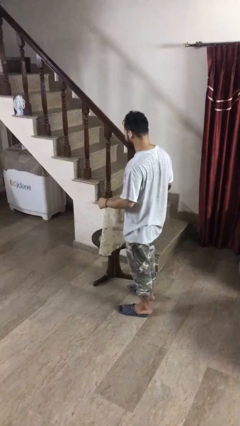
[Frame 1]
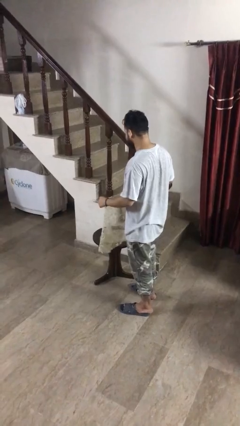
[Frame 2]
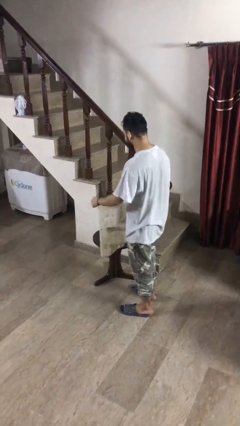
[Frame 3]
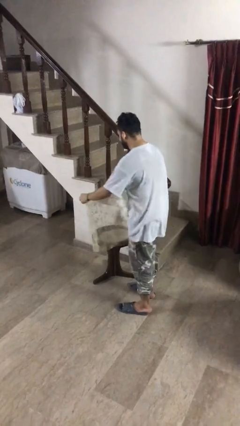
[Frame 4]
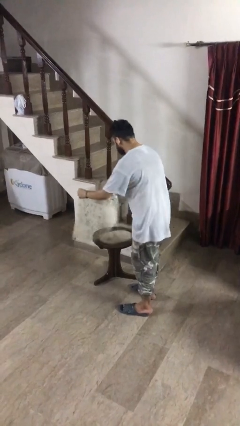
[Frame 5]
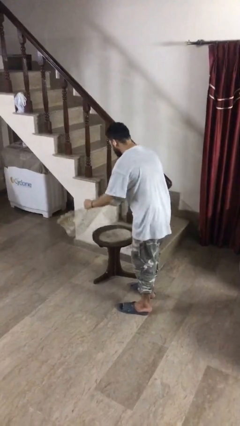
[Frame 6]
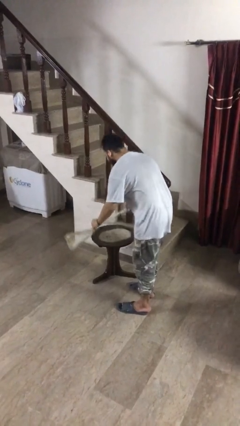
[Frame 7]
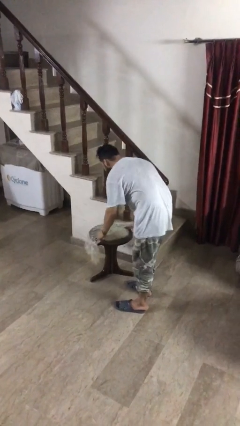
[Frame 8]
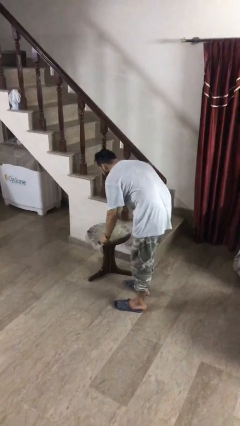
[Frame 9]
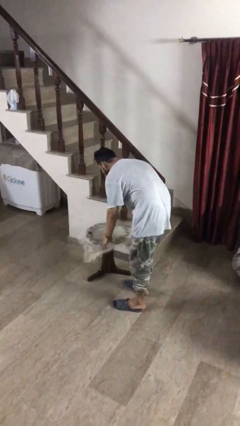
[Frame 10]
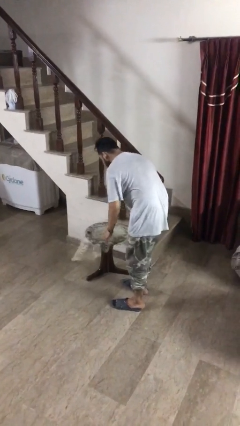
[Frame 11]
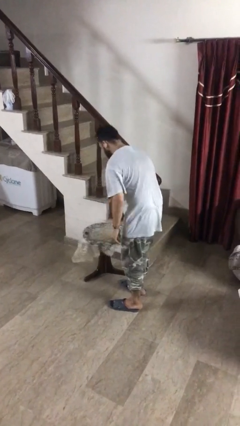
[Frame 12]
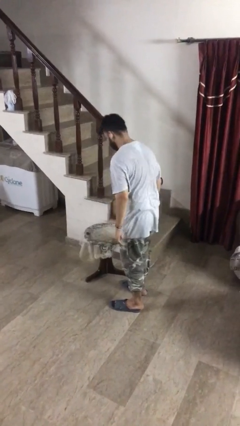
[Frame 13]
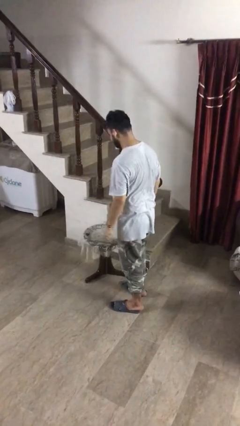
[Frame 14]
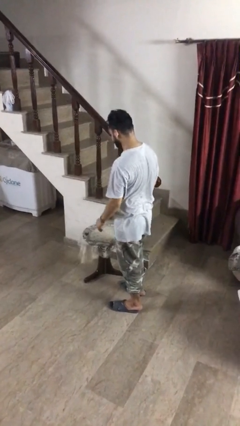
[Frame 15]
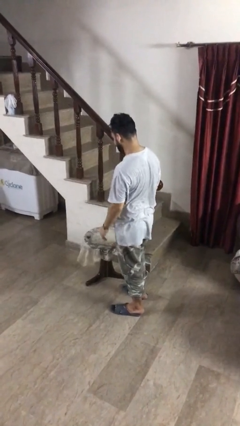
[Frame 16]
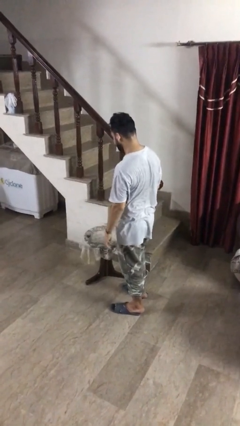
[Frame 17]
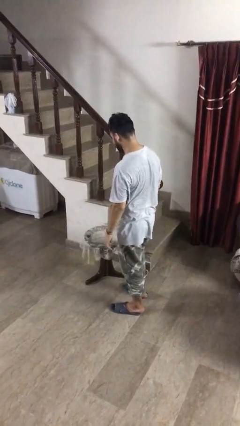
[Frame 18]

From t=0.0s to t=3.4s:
person spreads tablecloth

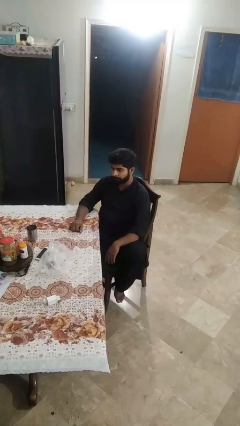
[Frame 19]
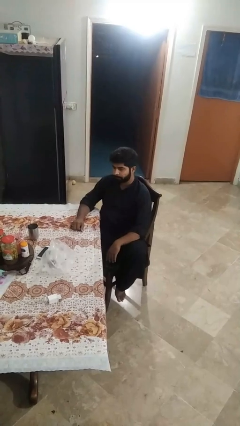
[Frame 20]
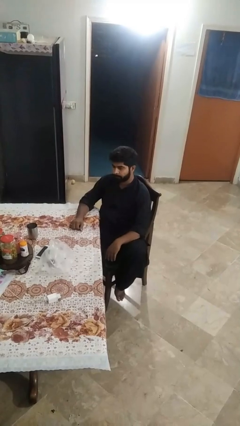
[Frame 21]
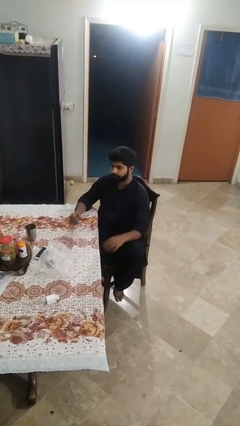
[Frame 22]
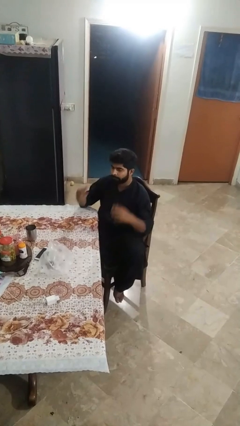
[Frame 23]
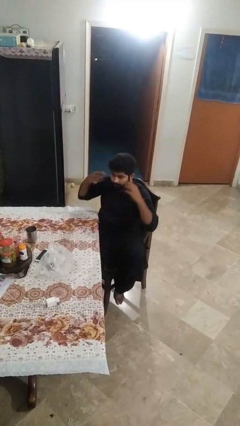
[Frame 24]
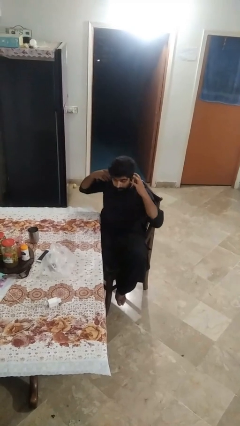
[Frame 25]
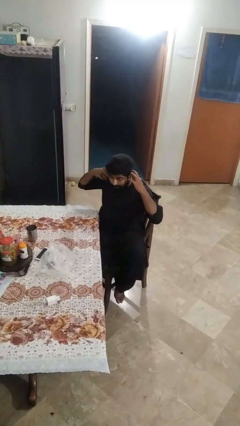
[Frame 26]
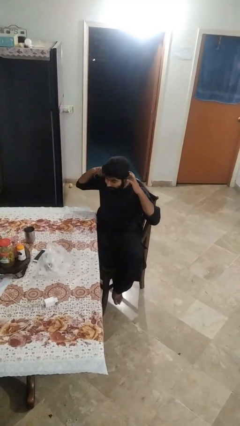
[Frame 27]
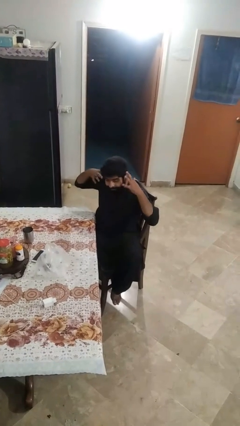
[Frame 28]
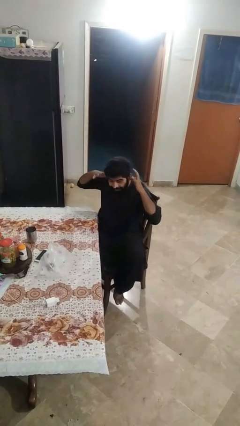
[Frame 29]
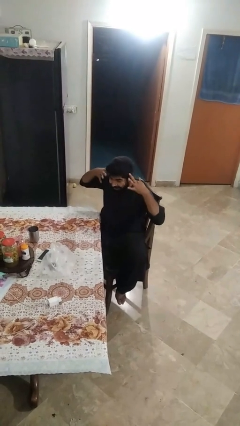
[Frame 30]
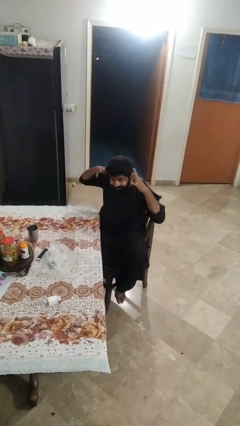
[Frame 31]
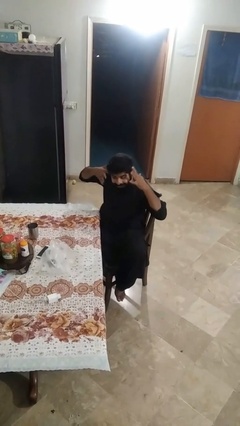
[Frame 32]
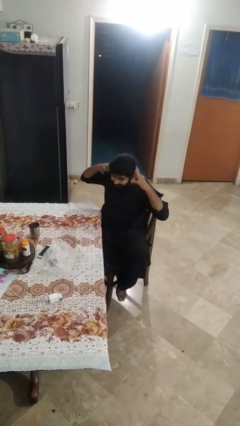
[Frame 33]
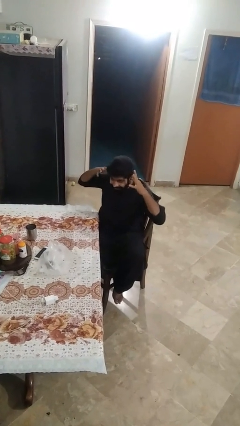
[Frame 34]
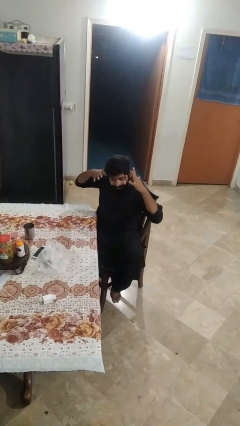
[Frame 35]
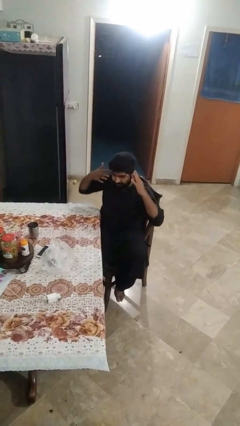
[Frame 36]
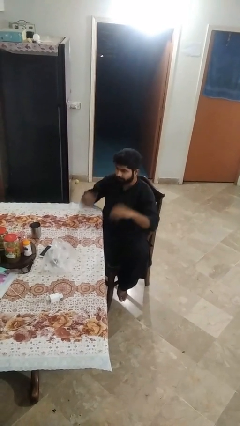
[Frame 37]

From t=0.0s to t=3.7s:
person puts fingers in ear

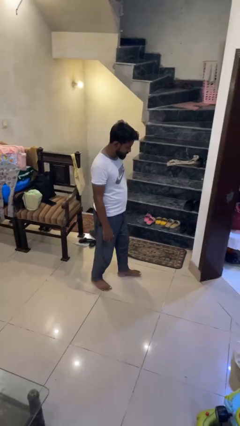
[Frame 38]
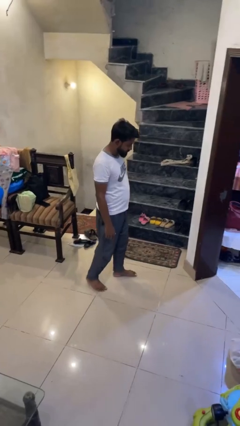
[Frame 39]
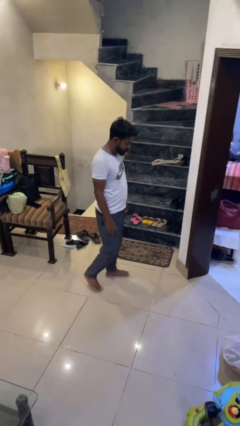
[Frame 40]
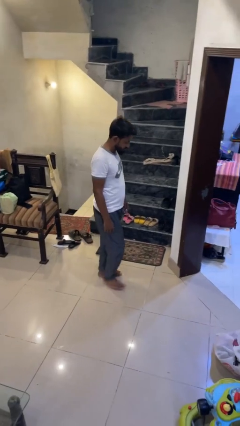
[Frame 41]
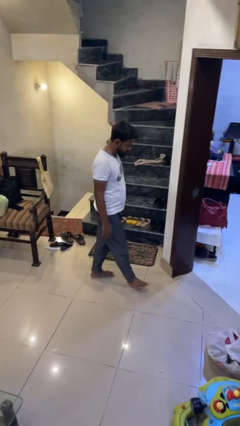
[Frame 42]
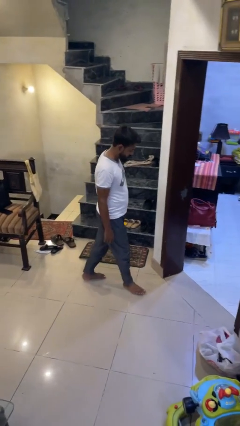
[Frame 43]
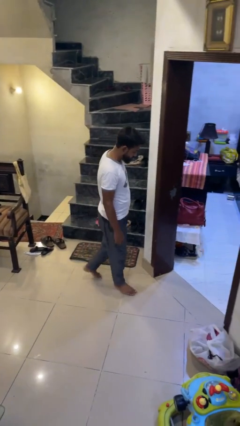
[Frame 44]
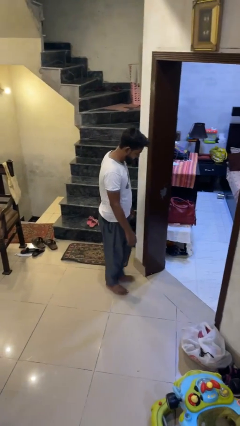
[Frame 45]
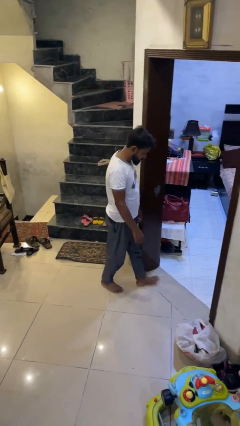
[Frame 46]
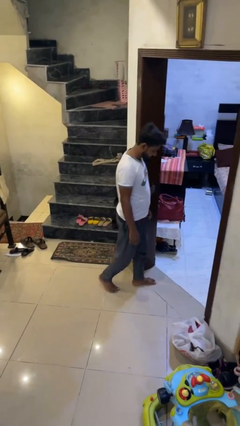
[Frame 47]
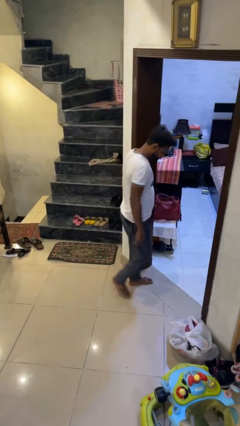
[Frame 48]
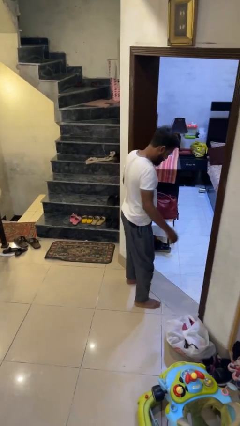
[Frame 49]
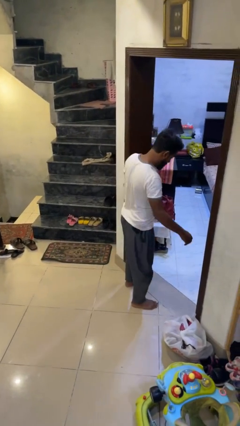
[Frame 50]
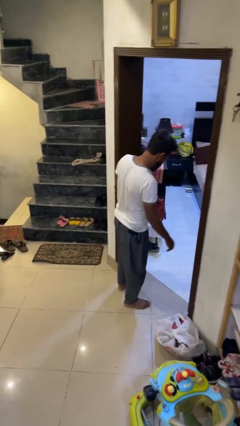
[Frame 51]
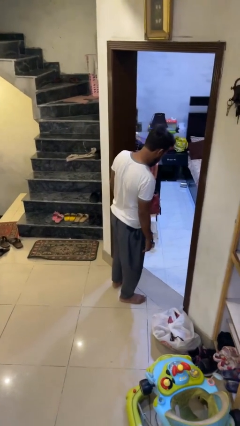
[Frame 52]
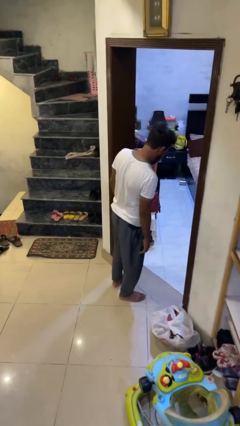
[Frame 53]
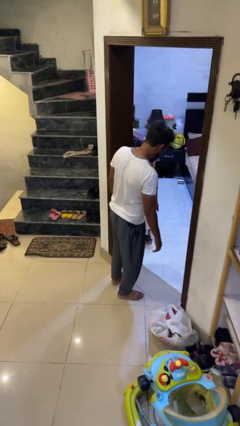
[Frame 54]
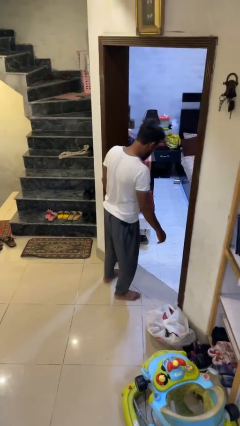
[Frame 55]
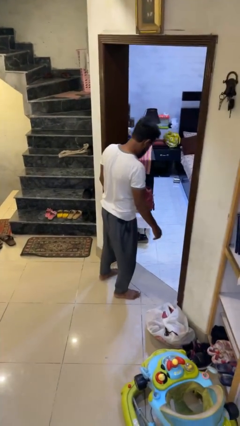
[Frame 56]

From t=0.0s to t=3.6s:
person bumps into wall

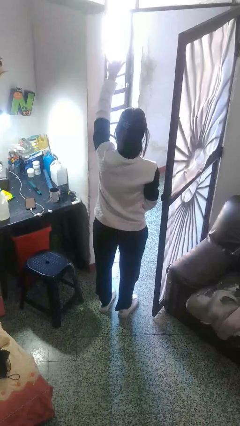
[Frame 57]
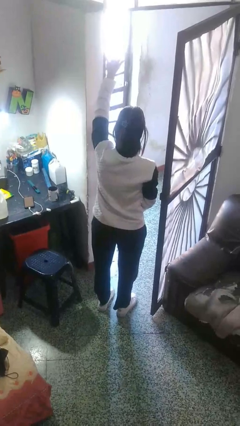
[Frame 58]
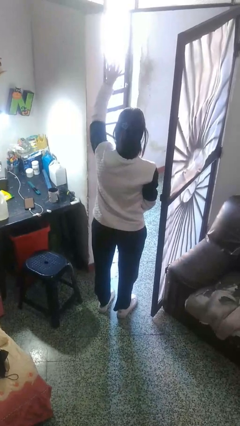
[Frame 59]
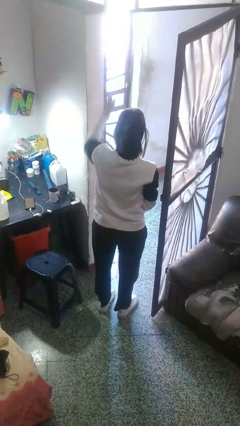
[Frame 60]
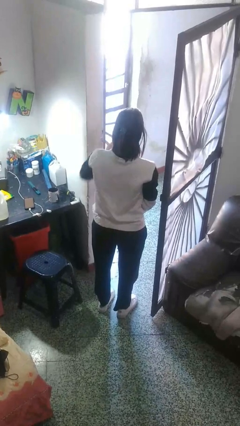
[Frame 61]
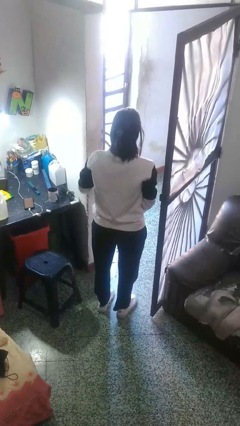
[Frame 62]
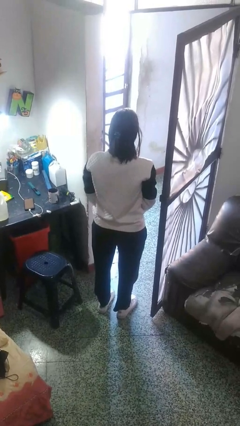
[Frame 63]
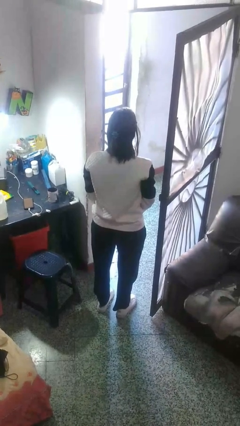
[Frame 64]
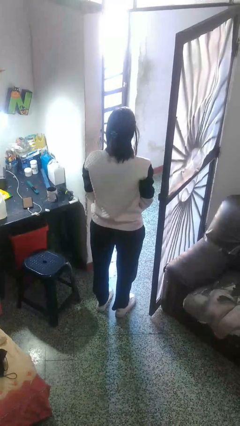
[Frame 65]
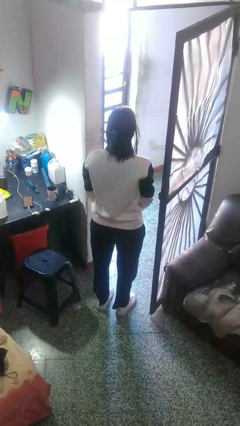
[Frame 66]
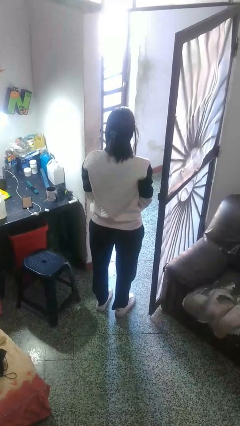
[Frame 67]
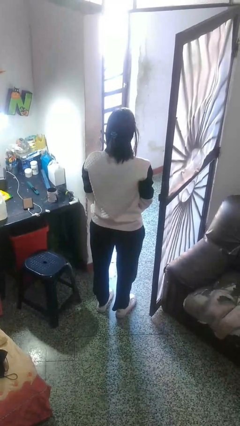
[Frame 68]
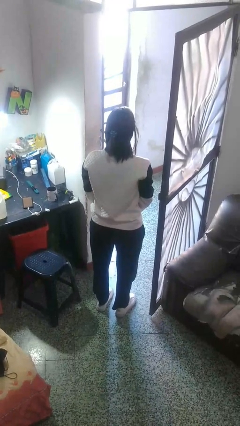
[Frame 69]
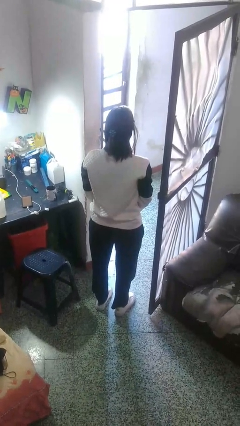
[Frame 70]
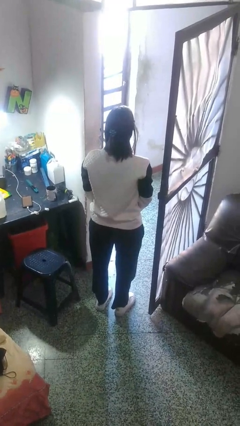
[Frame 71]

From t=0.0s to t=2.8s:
person gestures lower hand

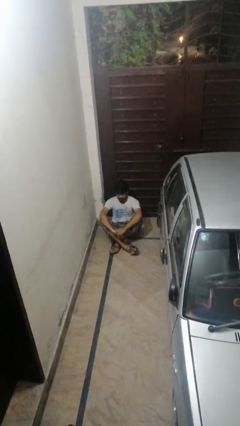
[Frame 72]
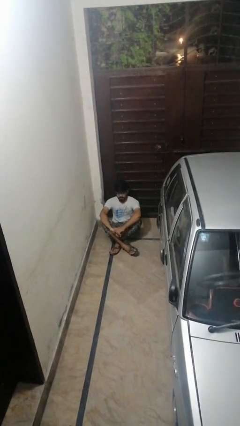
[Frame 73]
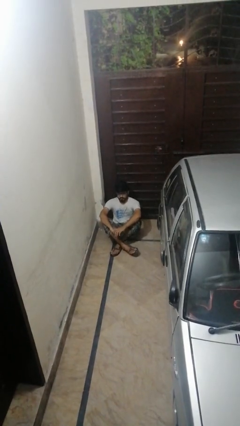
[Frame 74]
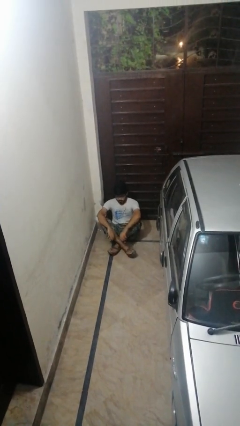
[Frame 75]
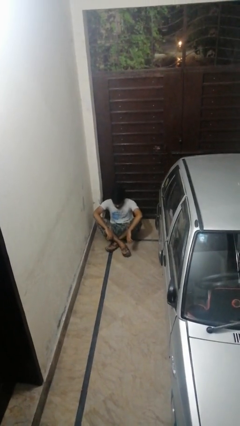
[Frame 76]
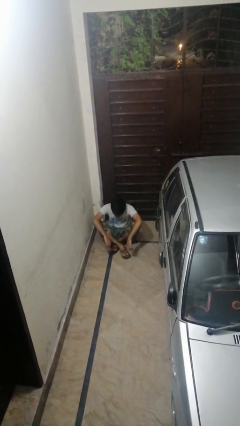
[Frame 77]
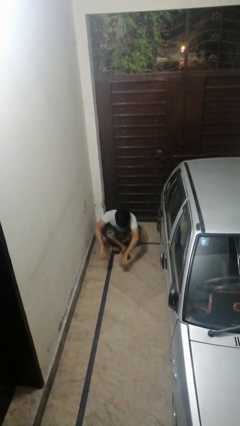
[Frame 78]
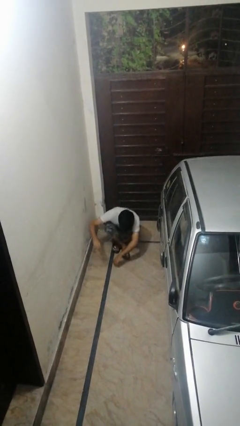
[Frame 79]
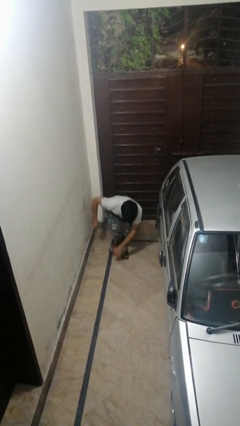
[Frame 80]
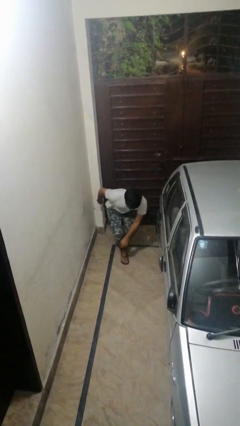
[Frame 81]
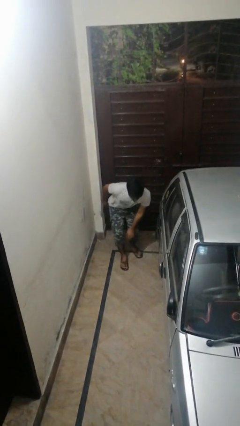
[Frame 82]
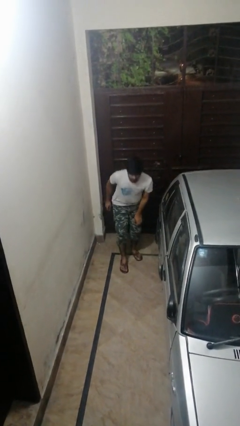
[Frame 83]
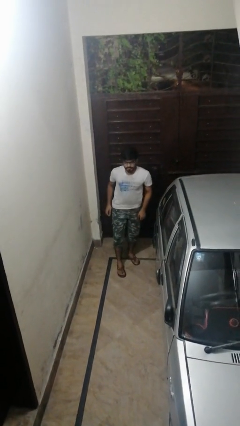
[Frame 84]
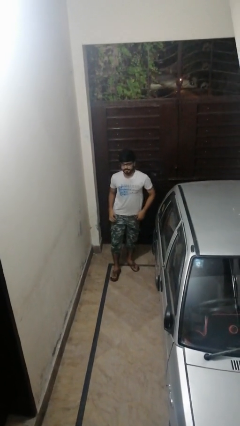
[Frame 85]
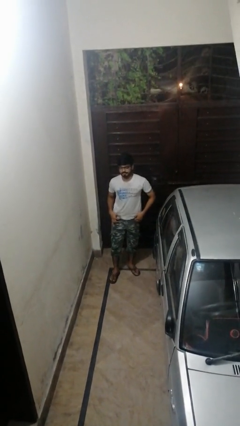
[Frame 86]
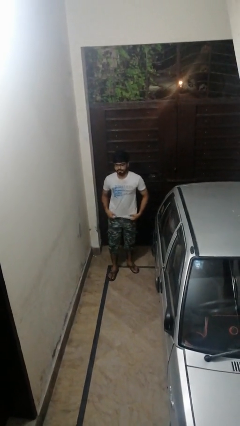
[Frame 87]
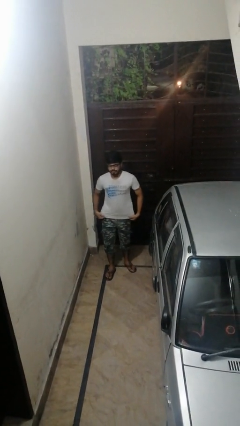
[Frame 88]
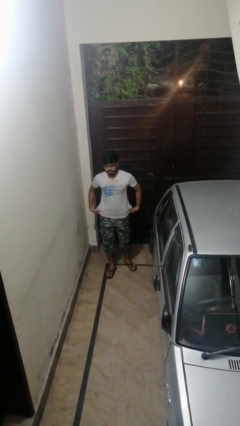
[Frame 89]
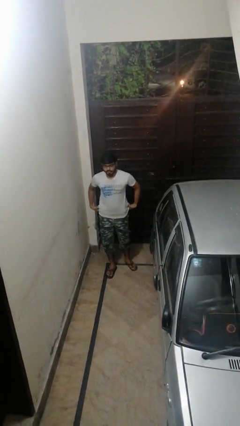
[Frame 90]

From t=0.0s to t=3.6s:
person stands up from floor

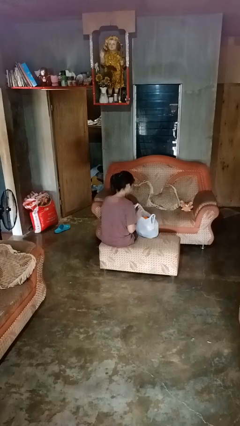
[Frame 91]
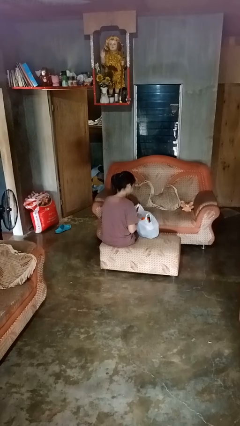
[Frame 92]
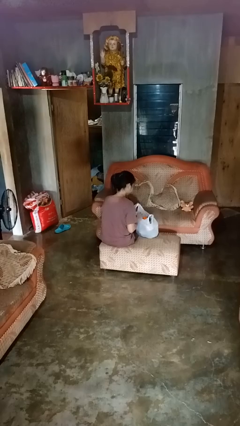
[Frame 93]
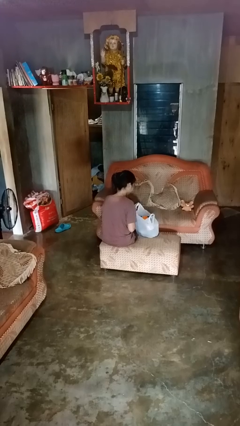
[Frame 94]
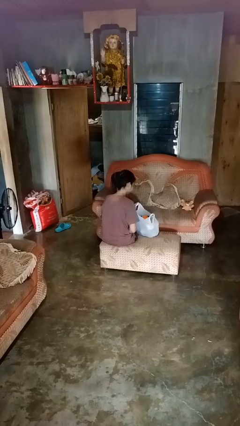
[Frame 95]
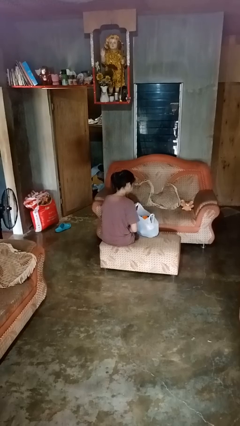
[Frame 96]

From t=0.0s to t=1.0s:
person puts object into bag
